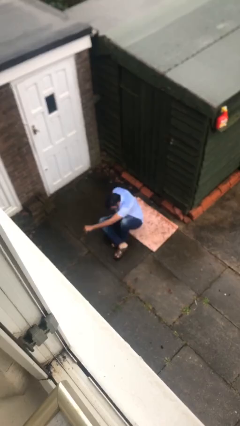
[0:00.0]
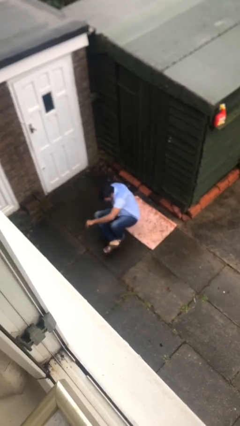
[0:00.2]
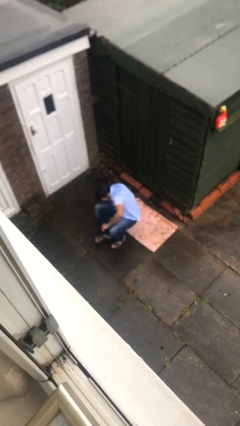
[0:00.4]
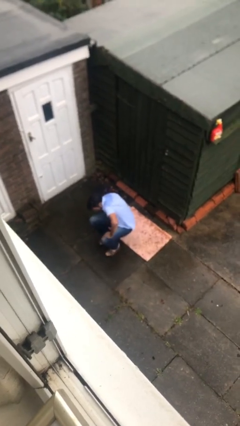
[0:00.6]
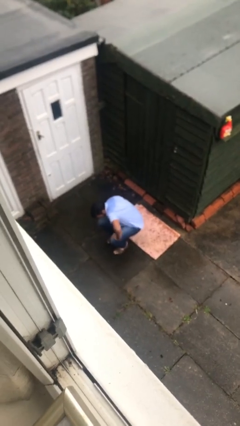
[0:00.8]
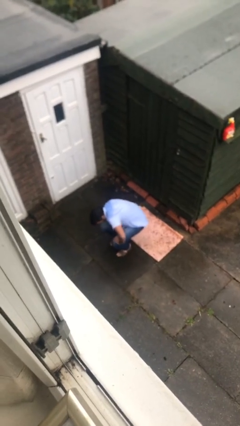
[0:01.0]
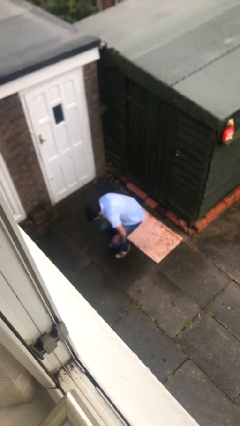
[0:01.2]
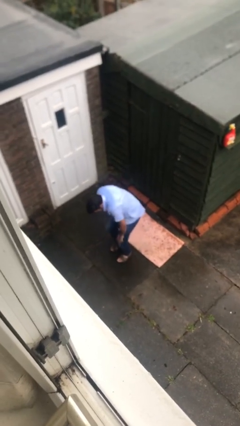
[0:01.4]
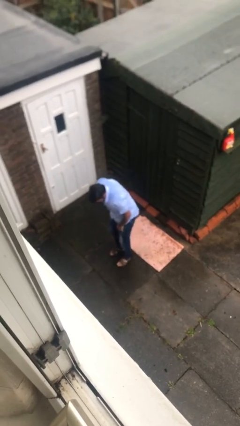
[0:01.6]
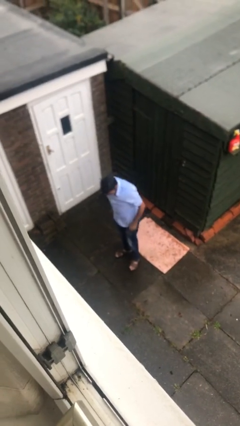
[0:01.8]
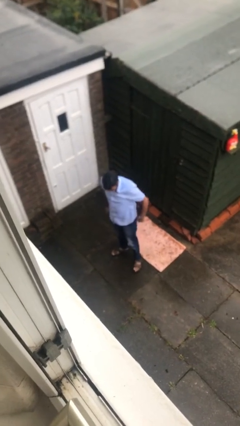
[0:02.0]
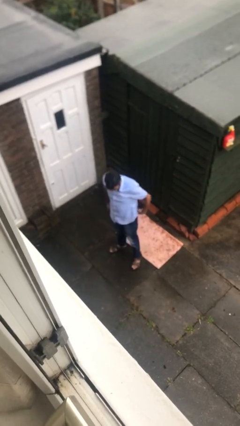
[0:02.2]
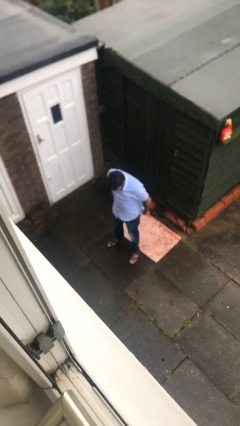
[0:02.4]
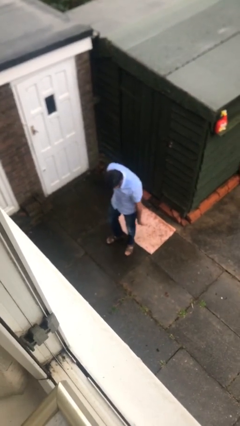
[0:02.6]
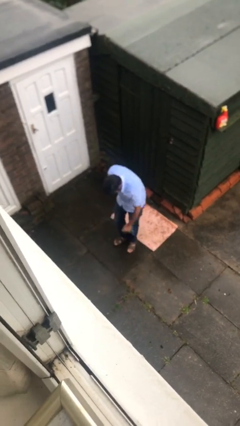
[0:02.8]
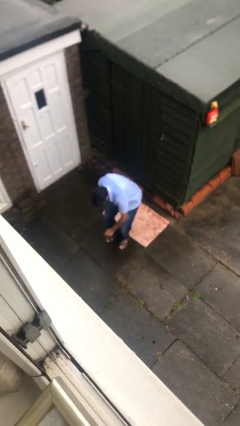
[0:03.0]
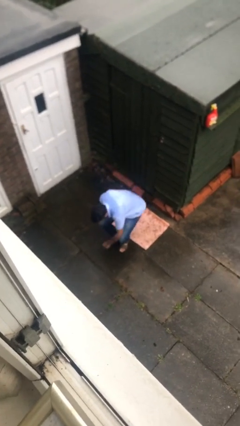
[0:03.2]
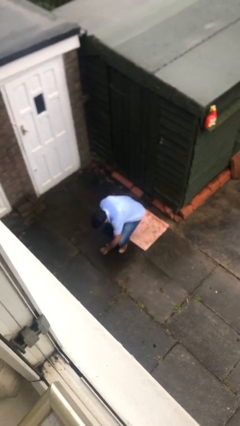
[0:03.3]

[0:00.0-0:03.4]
person stands up

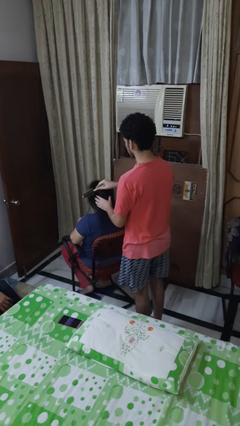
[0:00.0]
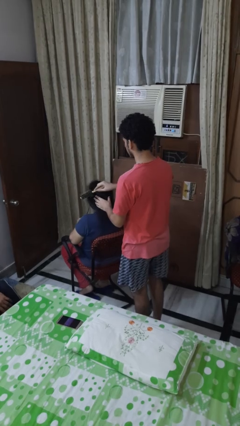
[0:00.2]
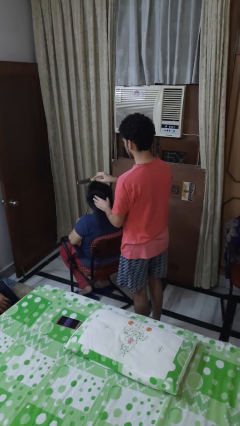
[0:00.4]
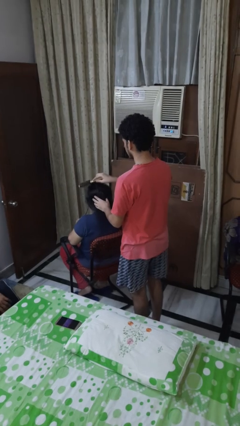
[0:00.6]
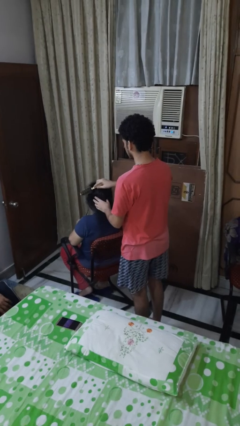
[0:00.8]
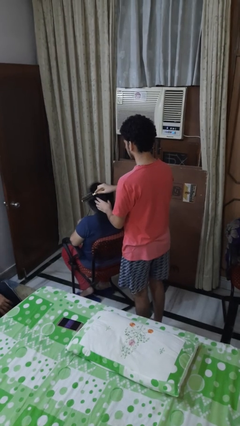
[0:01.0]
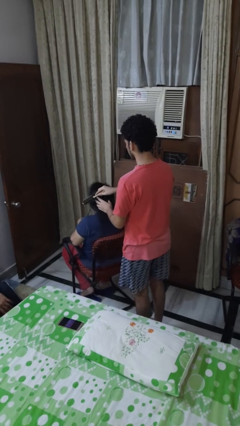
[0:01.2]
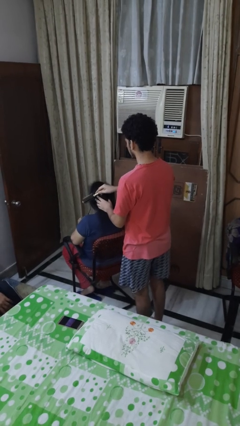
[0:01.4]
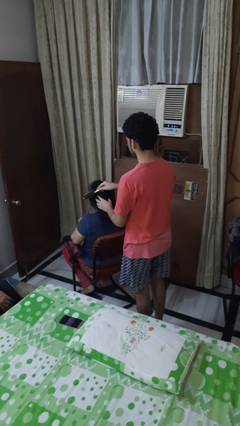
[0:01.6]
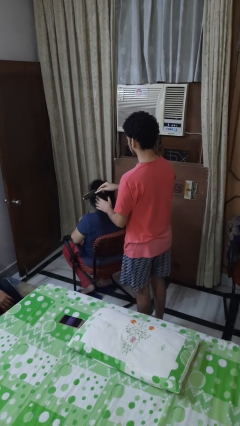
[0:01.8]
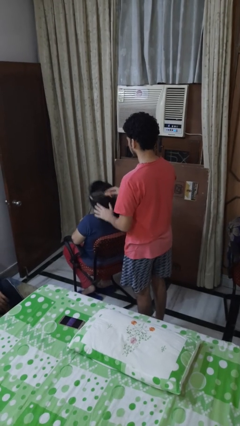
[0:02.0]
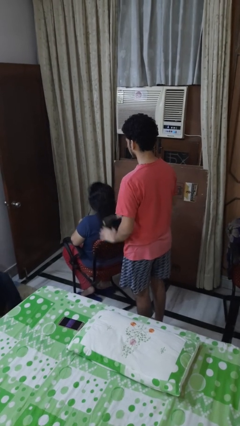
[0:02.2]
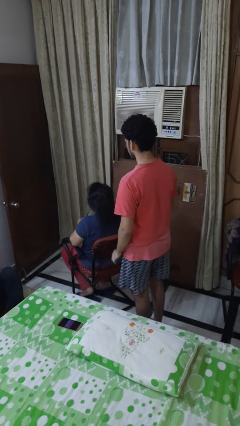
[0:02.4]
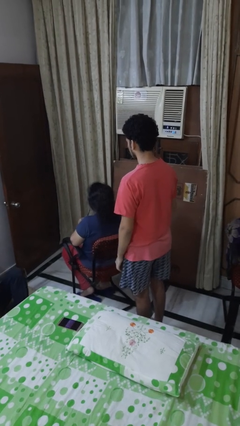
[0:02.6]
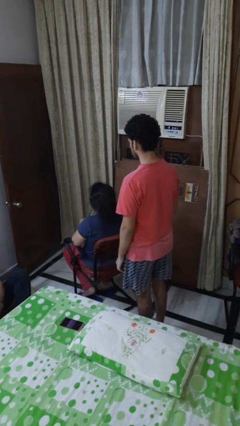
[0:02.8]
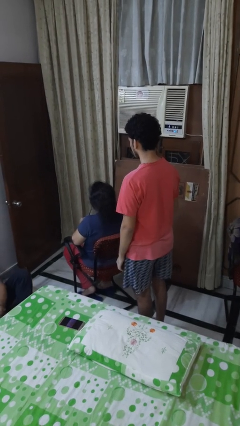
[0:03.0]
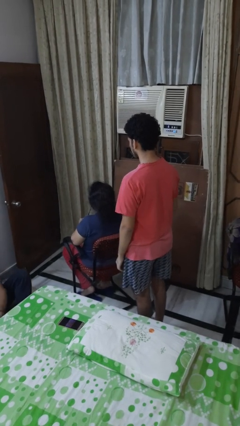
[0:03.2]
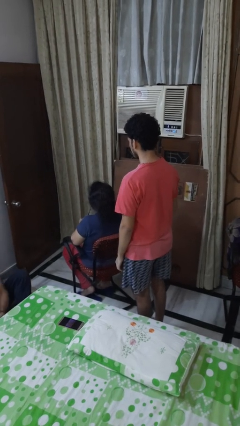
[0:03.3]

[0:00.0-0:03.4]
person brushes hair of person

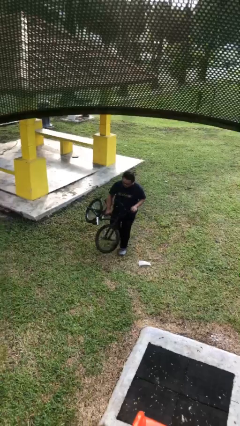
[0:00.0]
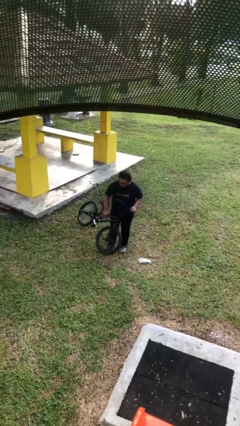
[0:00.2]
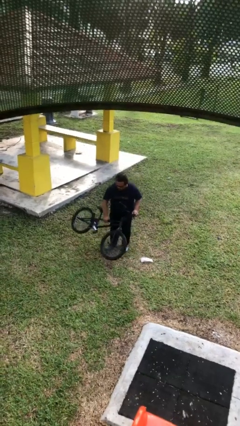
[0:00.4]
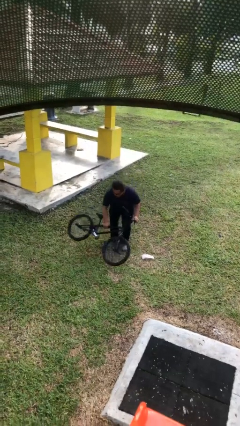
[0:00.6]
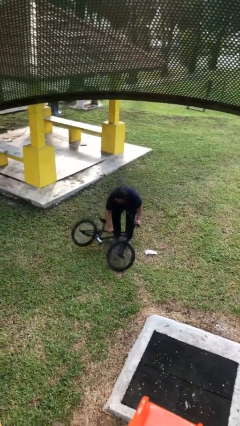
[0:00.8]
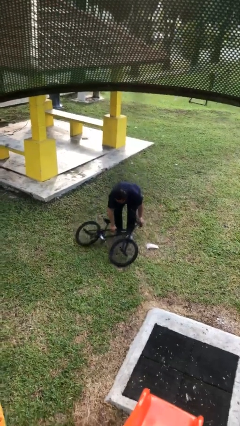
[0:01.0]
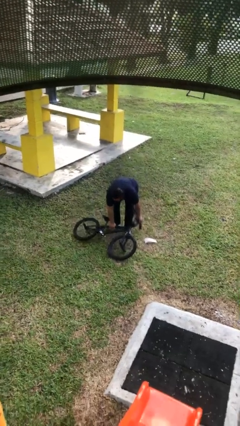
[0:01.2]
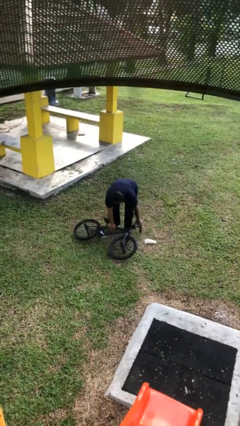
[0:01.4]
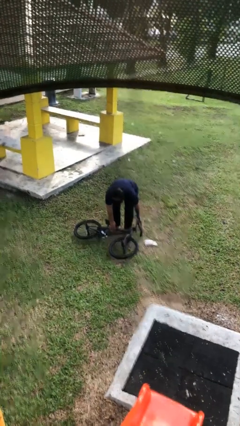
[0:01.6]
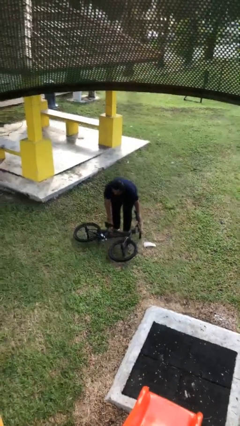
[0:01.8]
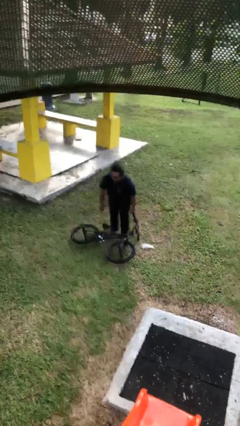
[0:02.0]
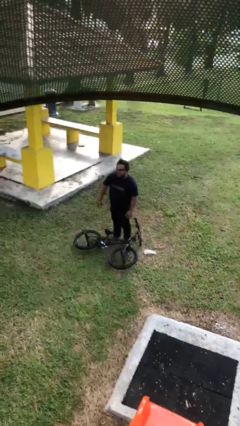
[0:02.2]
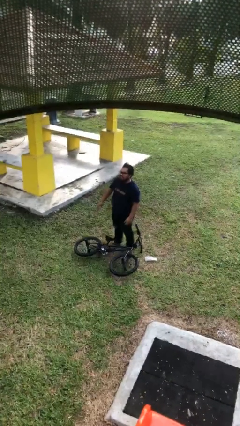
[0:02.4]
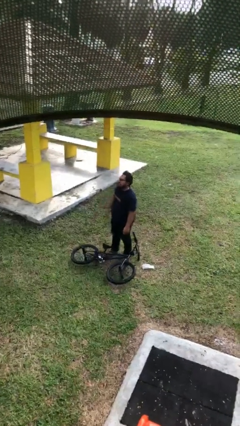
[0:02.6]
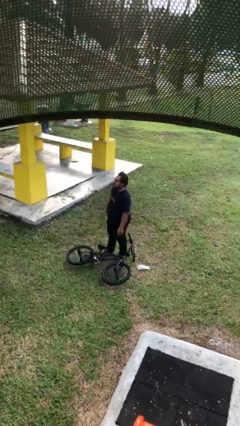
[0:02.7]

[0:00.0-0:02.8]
person puts down object on floor

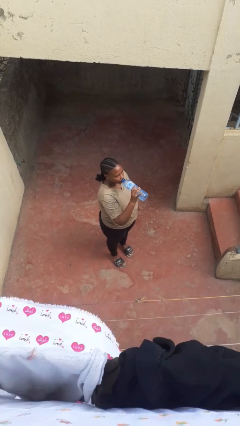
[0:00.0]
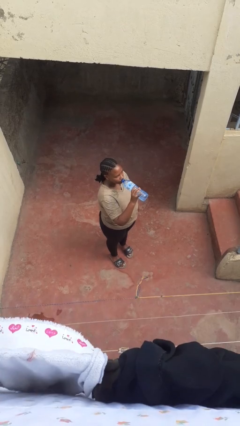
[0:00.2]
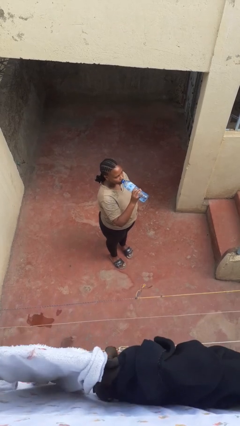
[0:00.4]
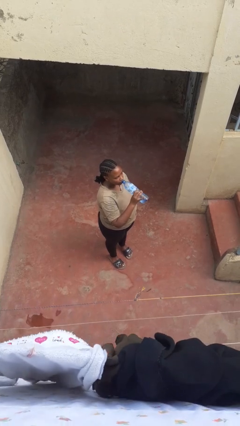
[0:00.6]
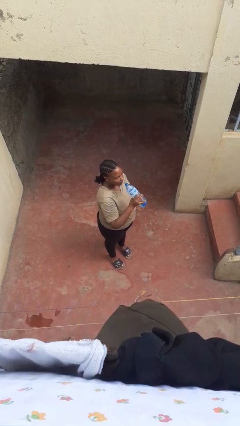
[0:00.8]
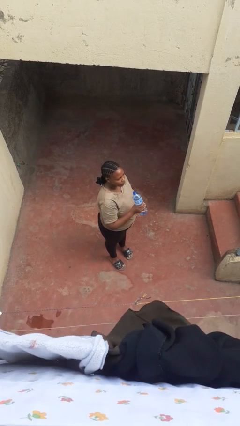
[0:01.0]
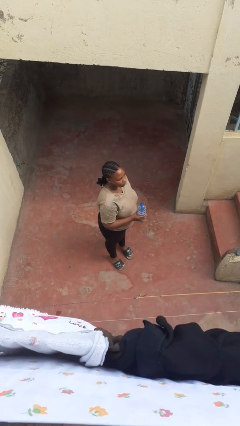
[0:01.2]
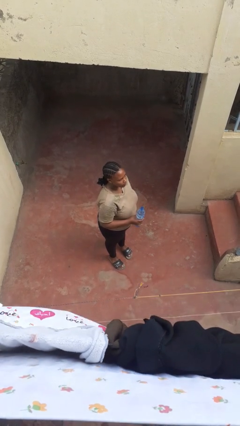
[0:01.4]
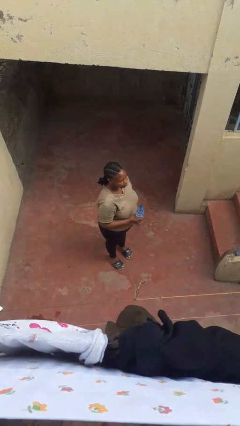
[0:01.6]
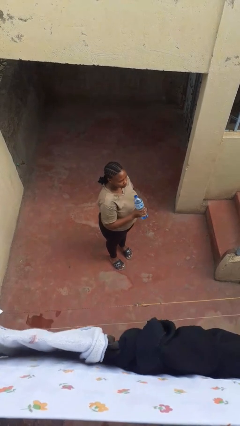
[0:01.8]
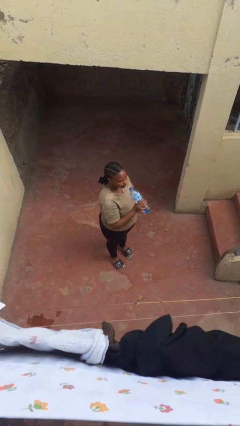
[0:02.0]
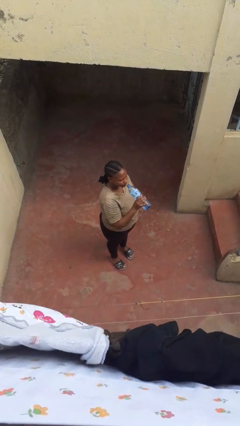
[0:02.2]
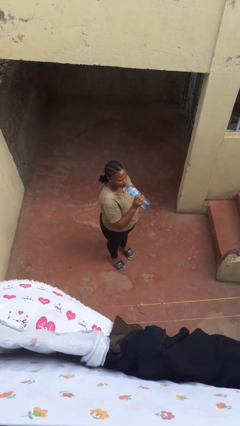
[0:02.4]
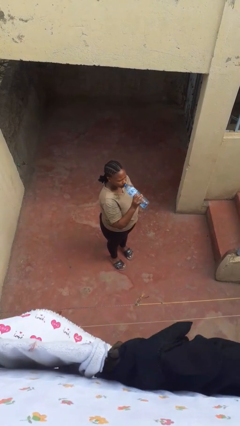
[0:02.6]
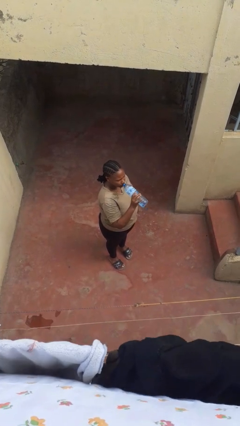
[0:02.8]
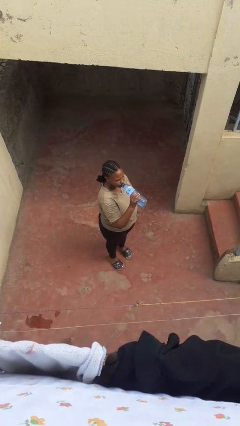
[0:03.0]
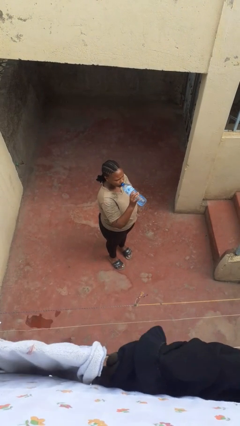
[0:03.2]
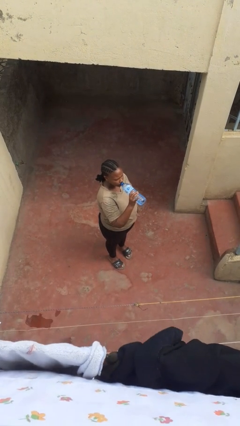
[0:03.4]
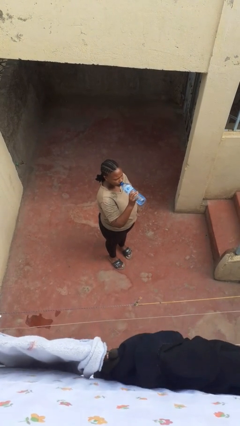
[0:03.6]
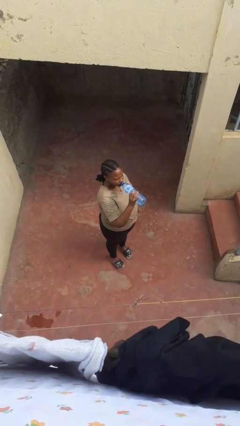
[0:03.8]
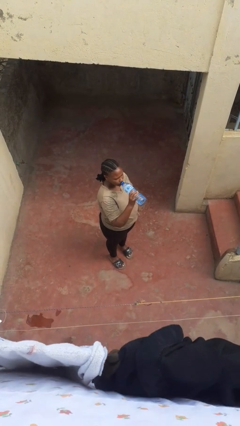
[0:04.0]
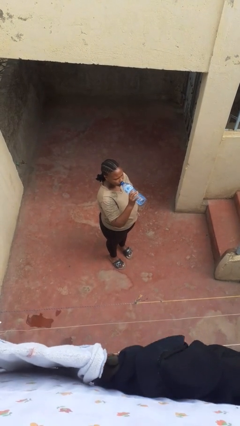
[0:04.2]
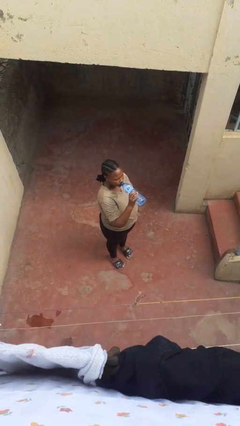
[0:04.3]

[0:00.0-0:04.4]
person drinks from bottle

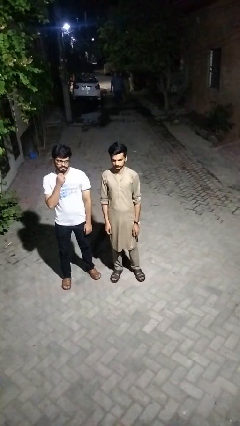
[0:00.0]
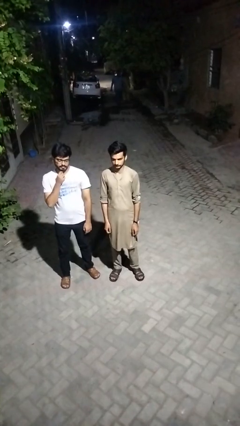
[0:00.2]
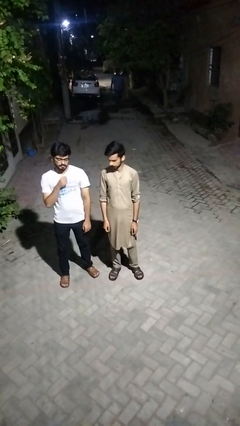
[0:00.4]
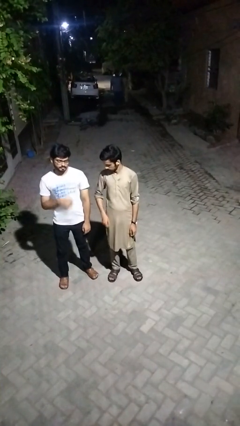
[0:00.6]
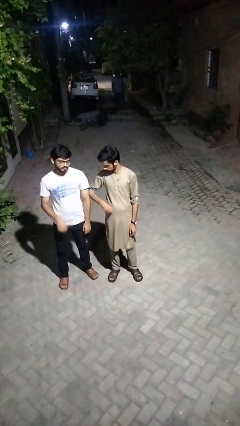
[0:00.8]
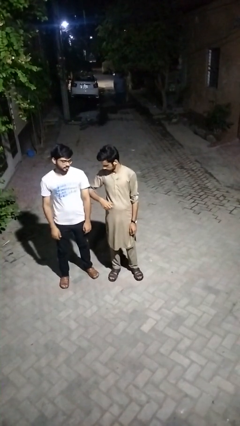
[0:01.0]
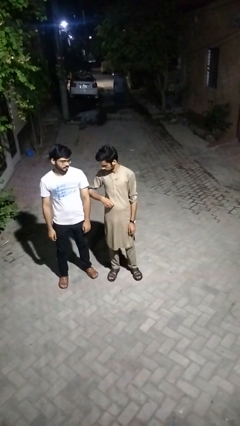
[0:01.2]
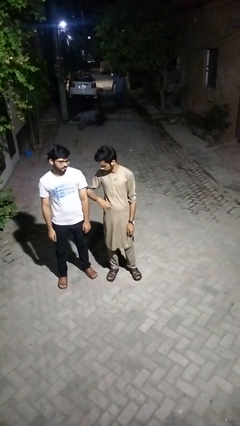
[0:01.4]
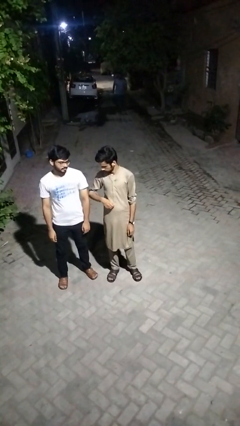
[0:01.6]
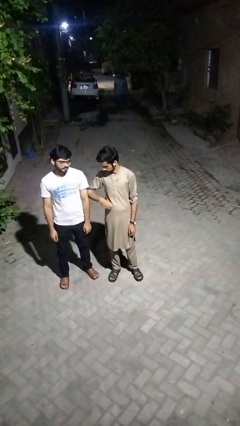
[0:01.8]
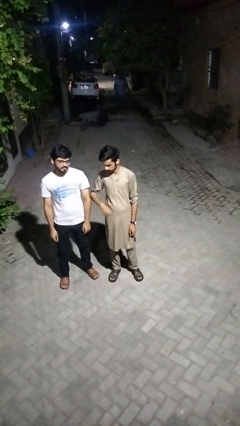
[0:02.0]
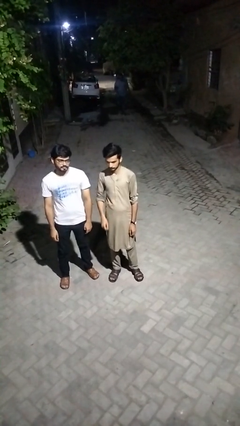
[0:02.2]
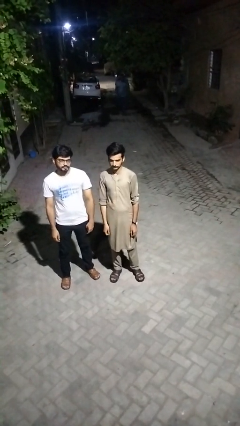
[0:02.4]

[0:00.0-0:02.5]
person nudges person with elbow

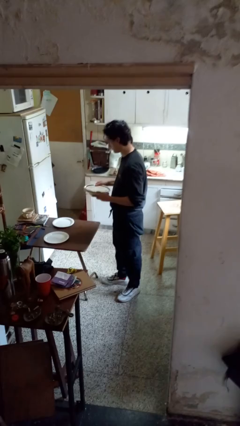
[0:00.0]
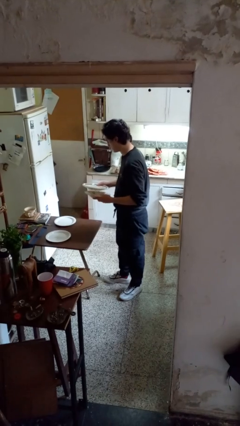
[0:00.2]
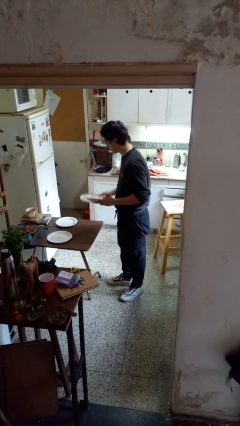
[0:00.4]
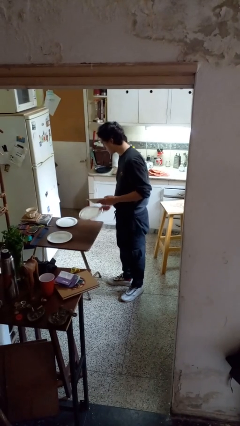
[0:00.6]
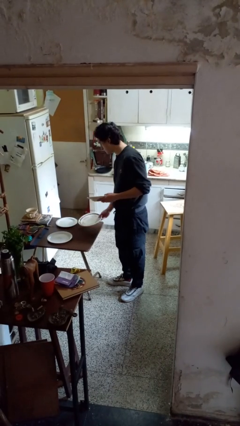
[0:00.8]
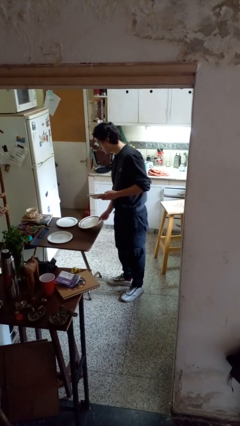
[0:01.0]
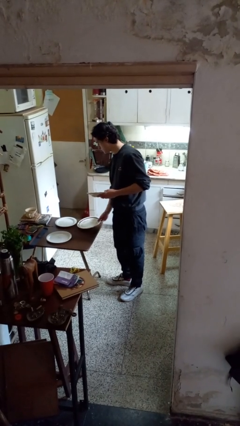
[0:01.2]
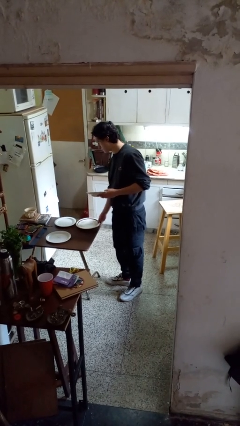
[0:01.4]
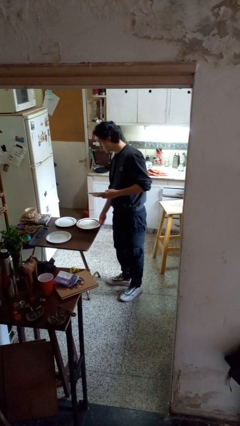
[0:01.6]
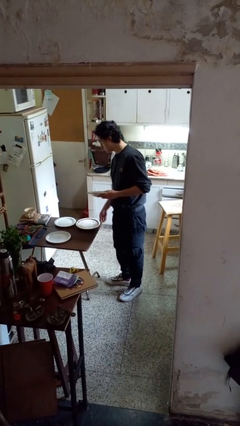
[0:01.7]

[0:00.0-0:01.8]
person sets table
